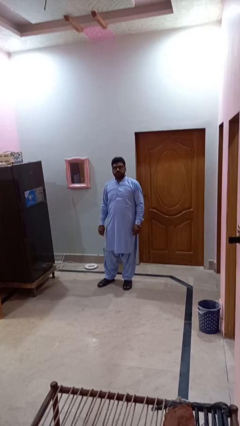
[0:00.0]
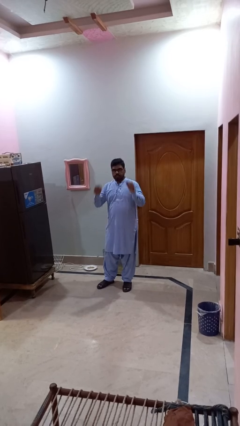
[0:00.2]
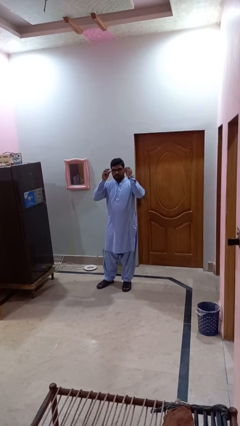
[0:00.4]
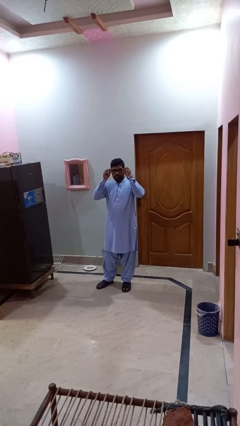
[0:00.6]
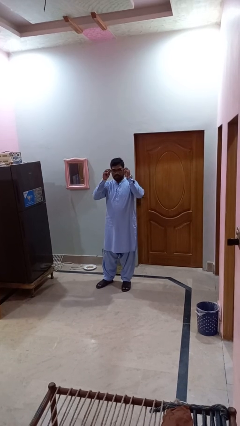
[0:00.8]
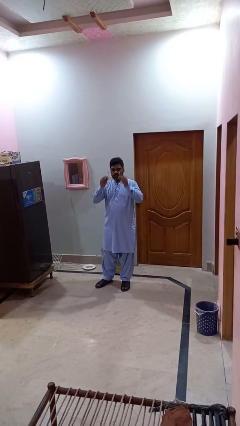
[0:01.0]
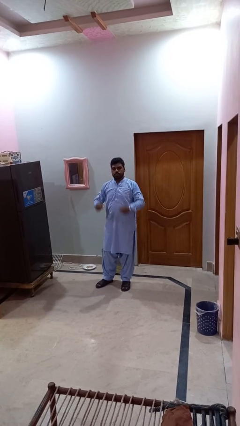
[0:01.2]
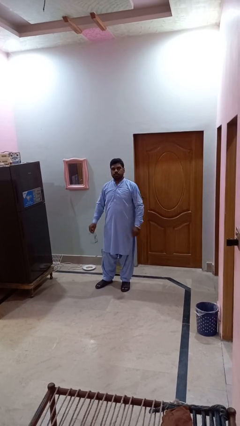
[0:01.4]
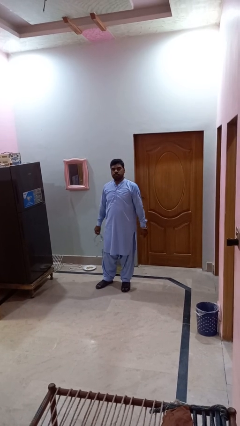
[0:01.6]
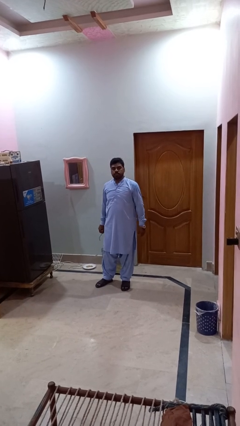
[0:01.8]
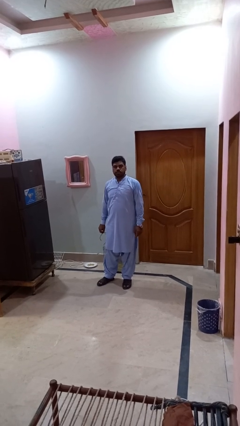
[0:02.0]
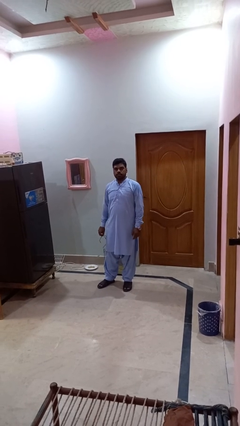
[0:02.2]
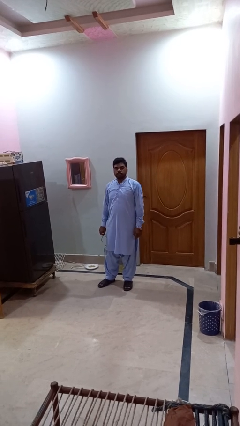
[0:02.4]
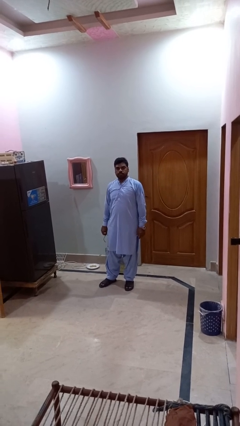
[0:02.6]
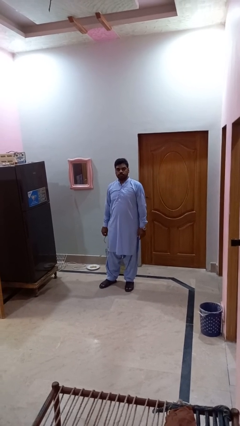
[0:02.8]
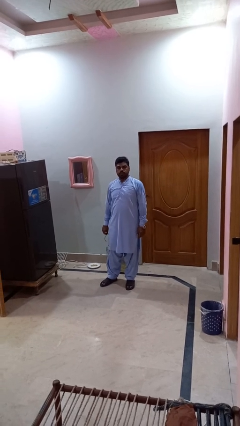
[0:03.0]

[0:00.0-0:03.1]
person takes off glasses

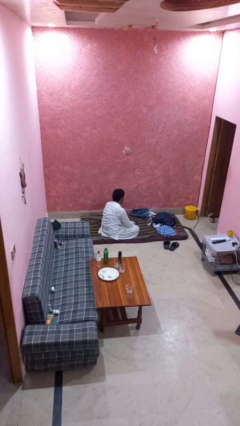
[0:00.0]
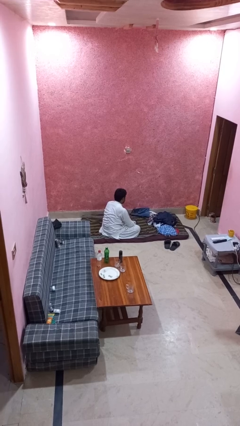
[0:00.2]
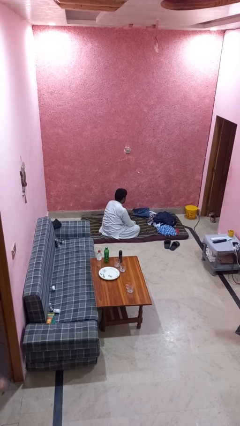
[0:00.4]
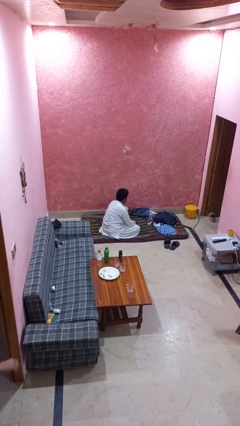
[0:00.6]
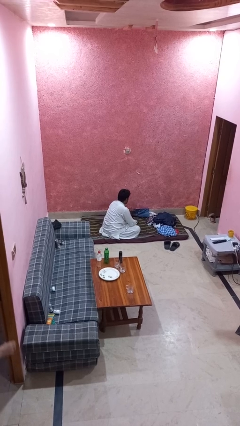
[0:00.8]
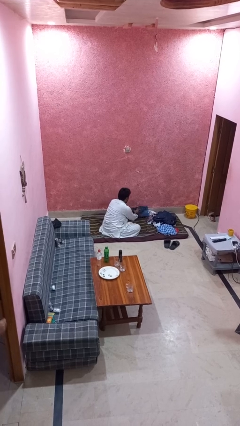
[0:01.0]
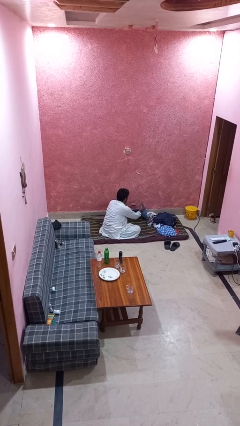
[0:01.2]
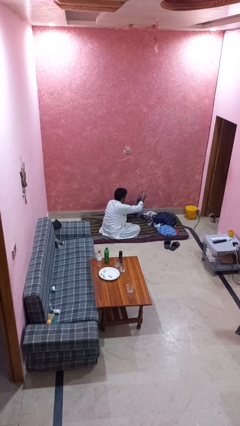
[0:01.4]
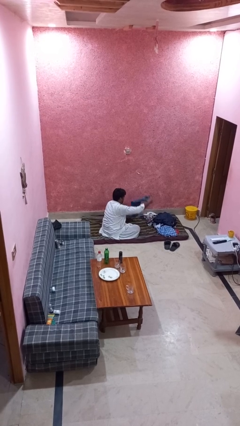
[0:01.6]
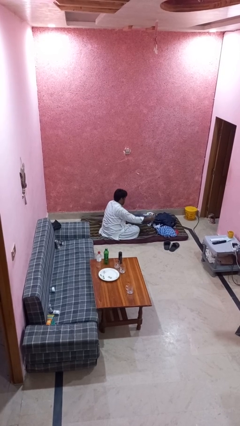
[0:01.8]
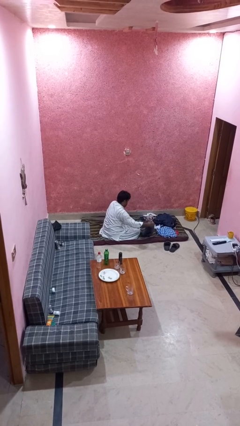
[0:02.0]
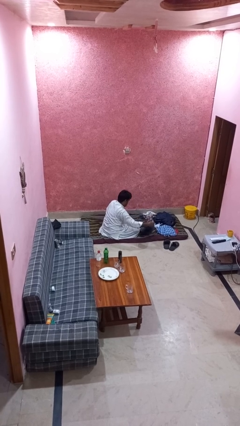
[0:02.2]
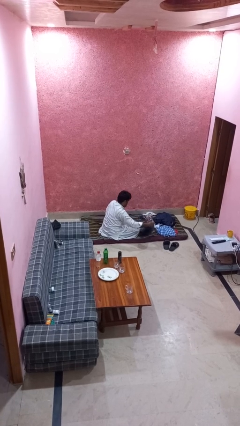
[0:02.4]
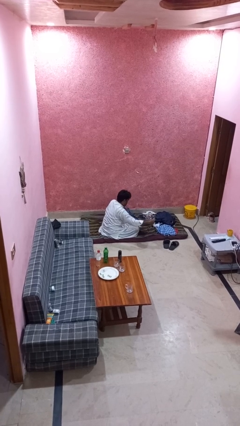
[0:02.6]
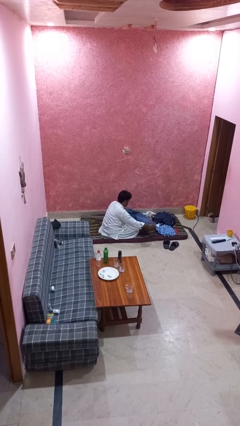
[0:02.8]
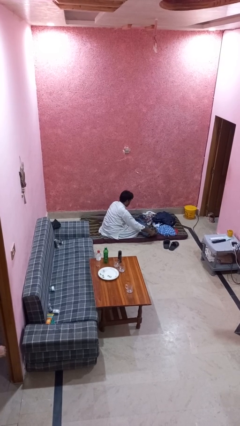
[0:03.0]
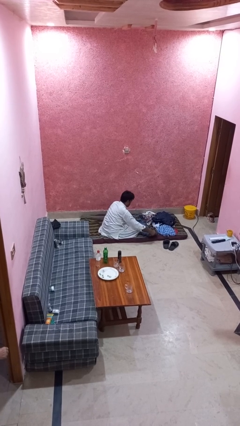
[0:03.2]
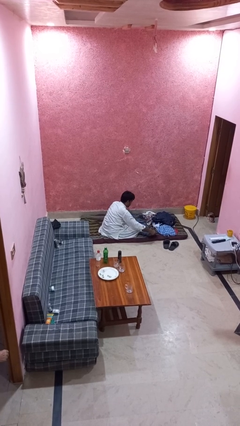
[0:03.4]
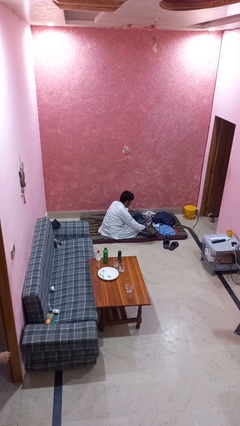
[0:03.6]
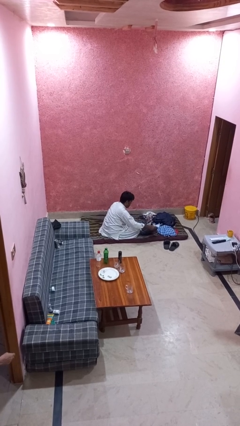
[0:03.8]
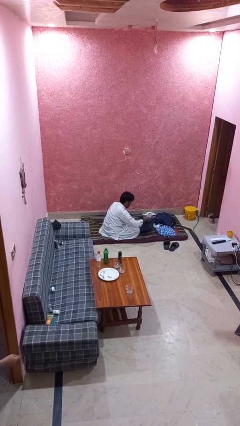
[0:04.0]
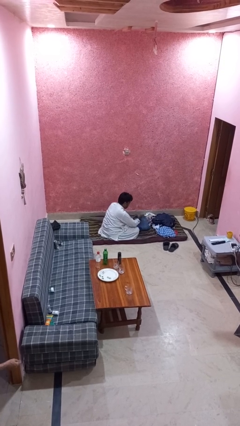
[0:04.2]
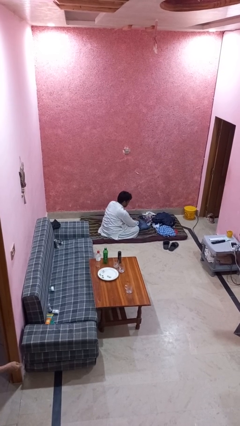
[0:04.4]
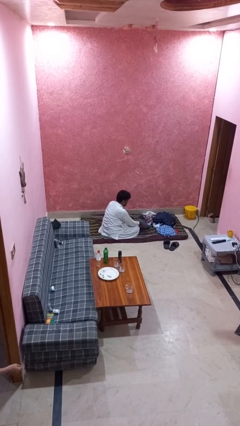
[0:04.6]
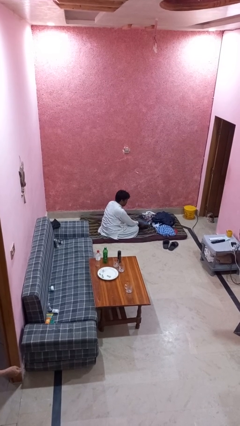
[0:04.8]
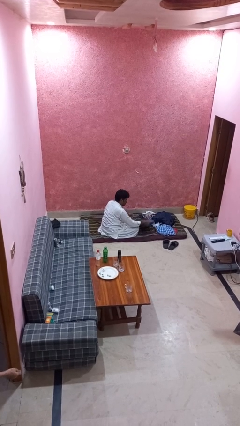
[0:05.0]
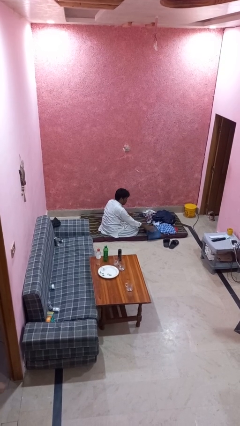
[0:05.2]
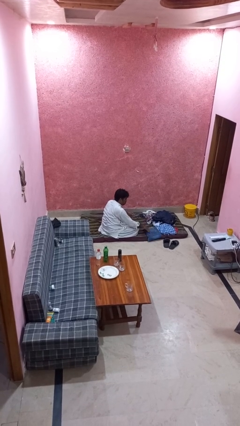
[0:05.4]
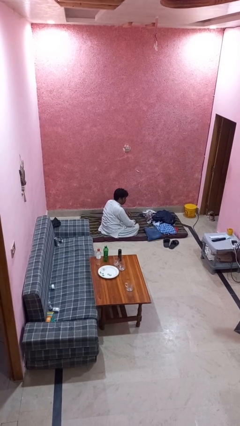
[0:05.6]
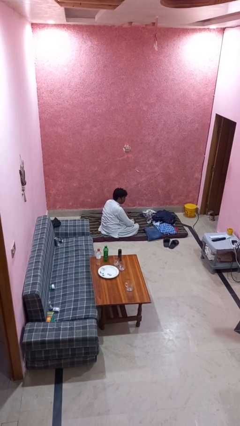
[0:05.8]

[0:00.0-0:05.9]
person folds pants

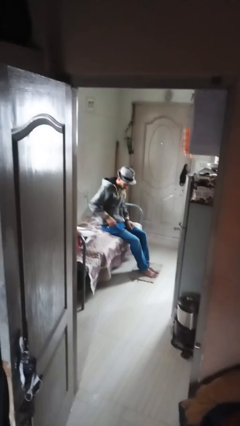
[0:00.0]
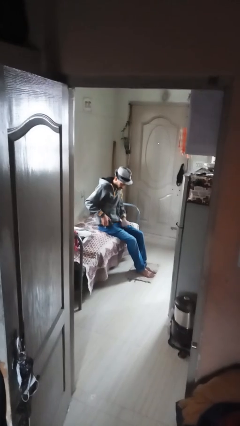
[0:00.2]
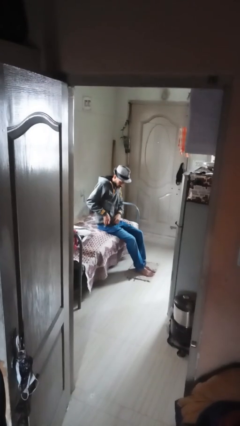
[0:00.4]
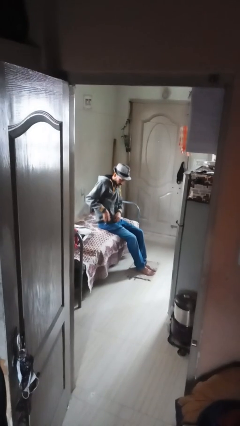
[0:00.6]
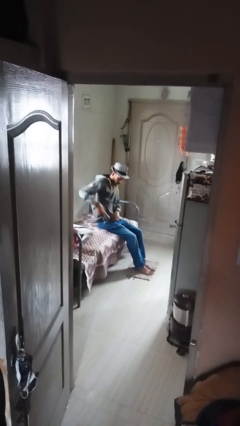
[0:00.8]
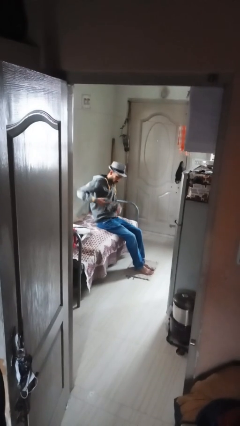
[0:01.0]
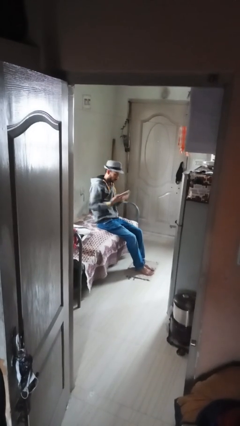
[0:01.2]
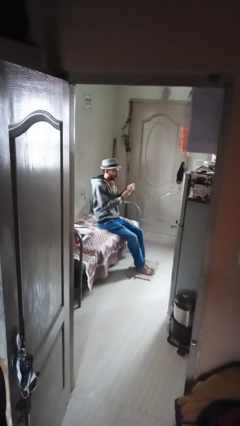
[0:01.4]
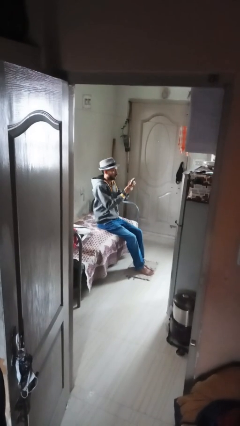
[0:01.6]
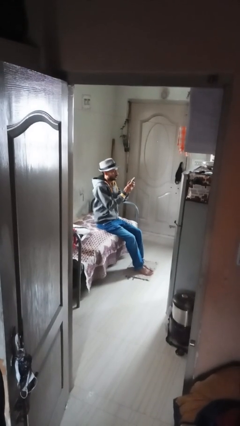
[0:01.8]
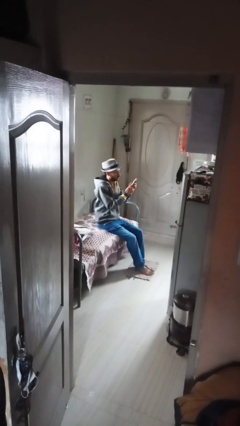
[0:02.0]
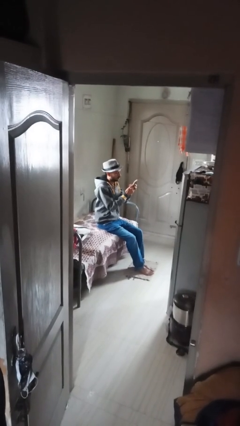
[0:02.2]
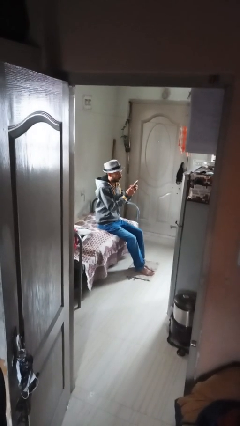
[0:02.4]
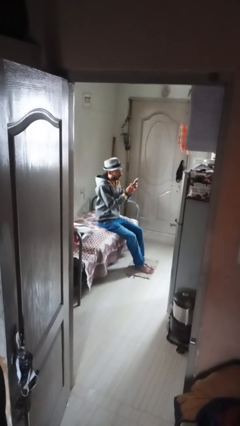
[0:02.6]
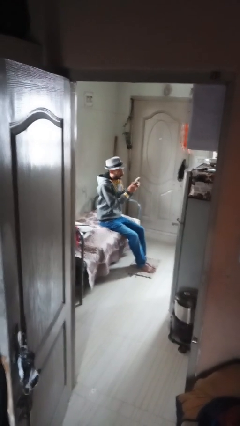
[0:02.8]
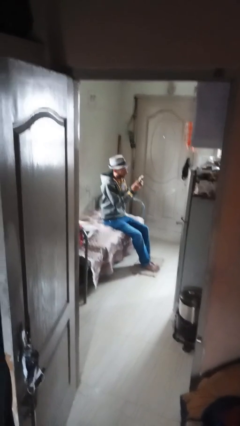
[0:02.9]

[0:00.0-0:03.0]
person takes phone from pocket

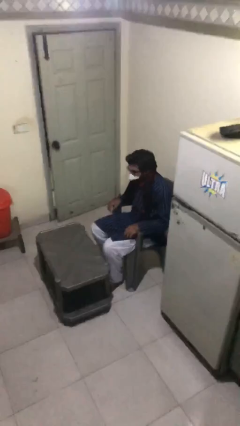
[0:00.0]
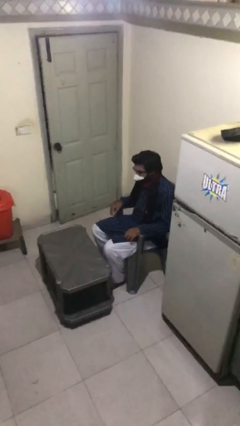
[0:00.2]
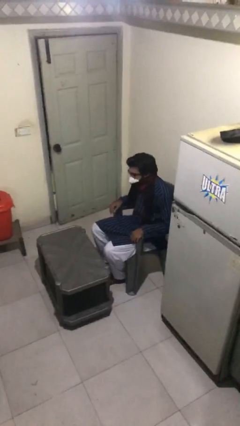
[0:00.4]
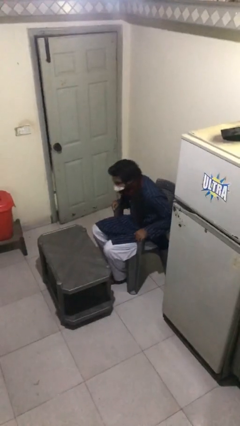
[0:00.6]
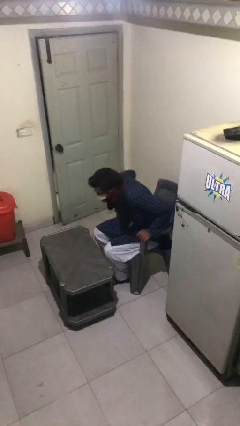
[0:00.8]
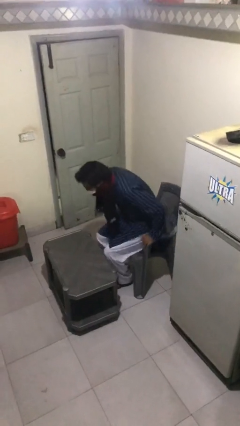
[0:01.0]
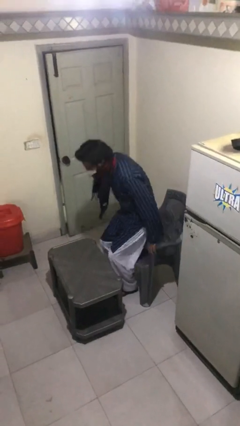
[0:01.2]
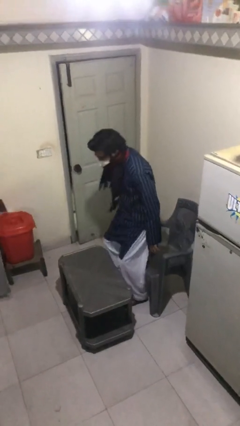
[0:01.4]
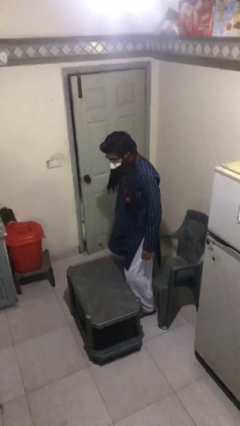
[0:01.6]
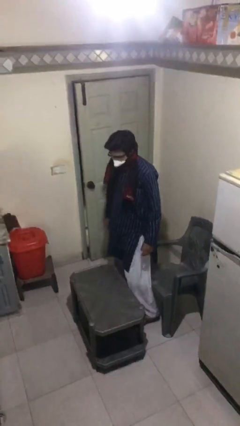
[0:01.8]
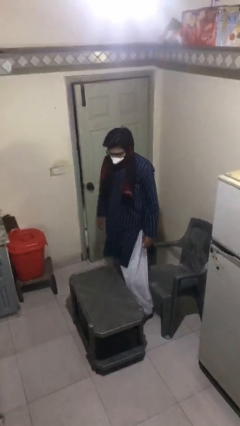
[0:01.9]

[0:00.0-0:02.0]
person stands up

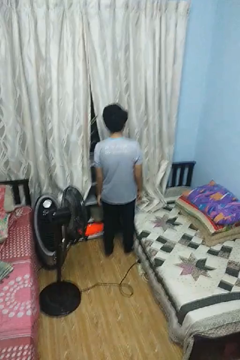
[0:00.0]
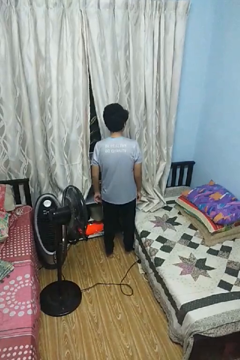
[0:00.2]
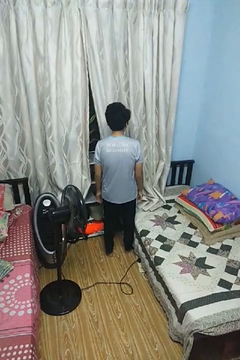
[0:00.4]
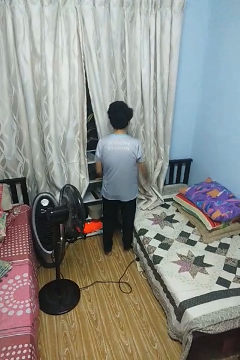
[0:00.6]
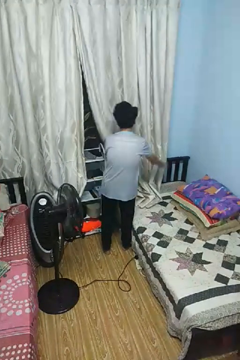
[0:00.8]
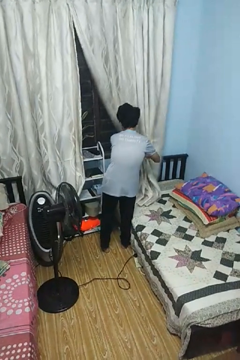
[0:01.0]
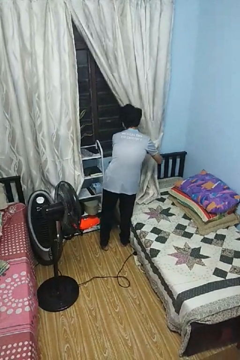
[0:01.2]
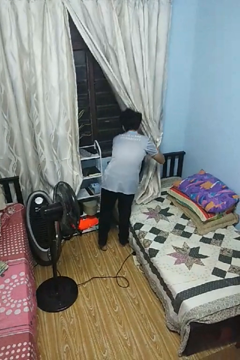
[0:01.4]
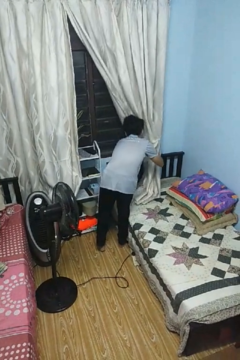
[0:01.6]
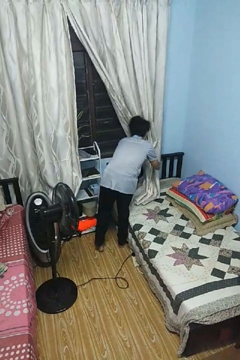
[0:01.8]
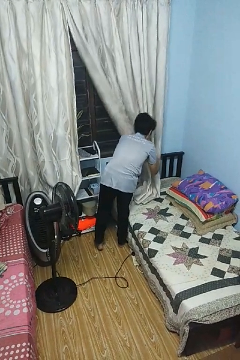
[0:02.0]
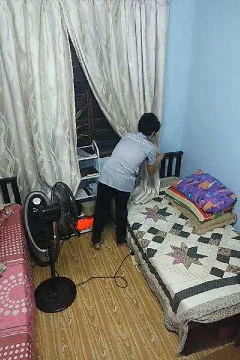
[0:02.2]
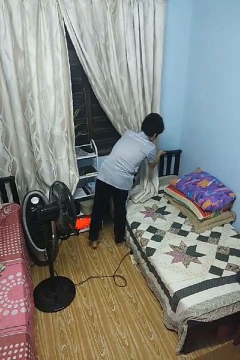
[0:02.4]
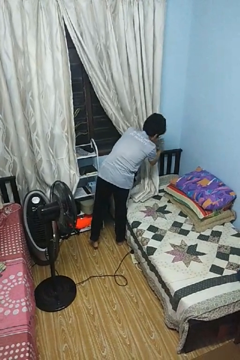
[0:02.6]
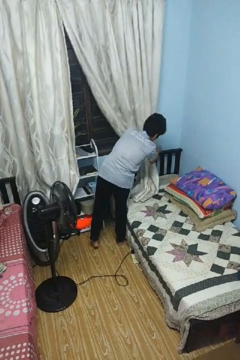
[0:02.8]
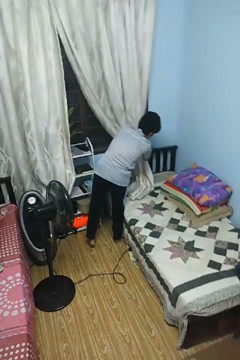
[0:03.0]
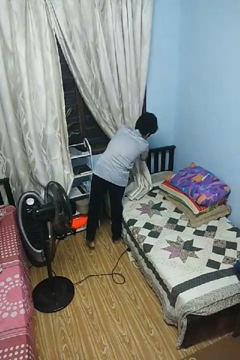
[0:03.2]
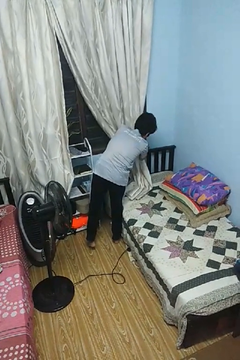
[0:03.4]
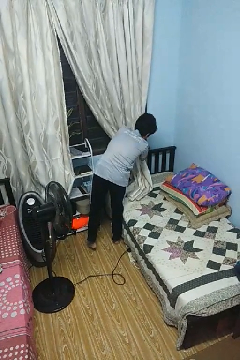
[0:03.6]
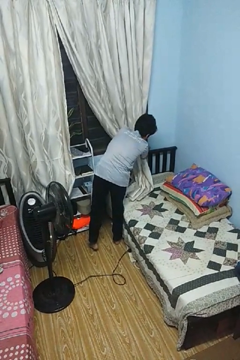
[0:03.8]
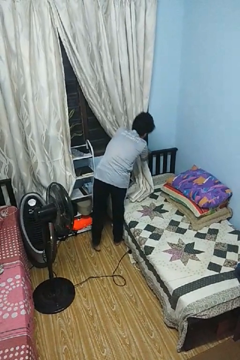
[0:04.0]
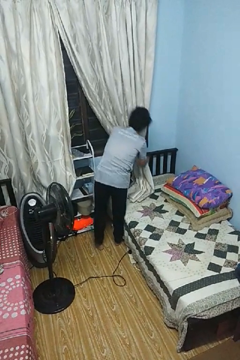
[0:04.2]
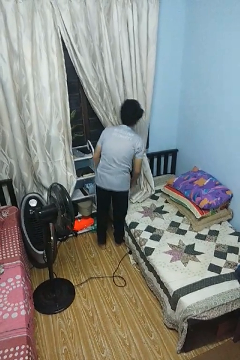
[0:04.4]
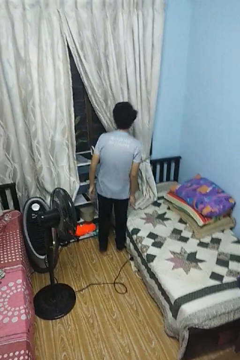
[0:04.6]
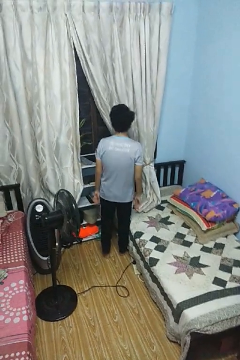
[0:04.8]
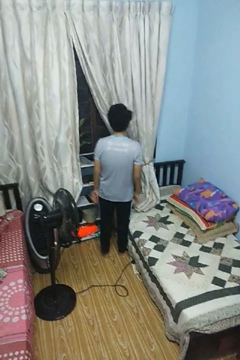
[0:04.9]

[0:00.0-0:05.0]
person opens curtains

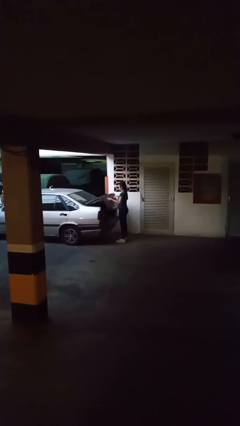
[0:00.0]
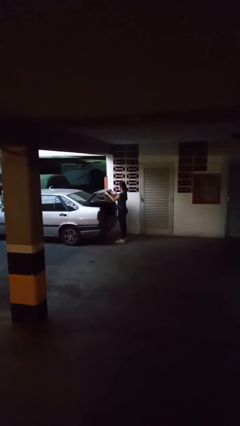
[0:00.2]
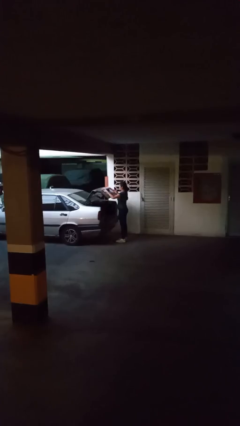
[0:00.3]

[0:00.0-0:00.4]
person opens car trunk
